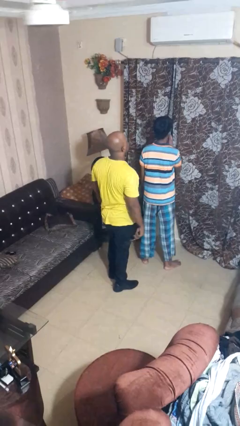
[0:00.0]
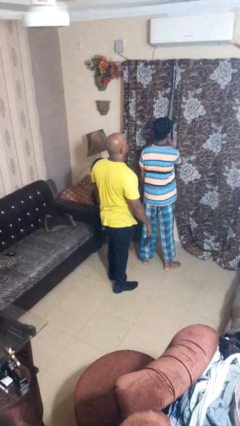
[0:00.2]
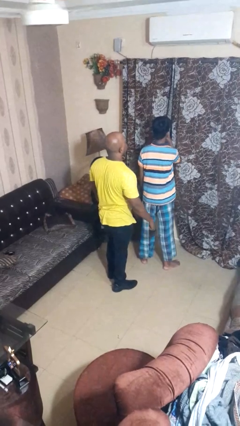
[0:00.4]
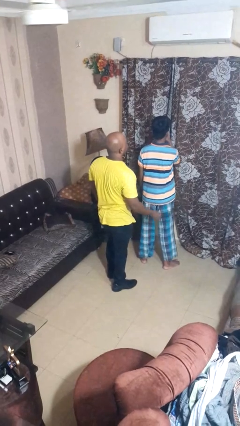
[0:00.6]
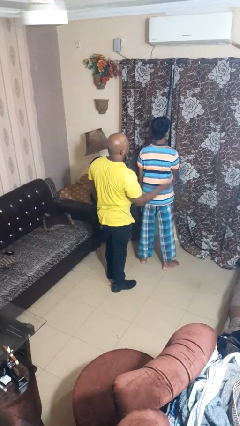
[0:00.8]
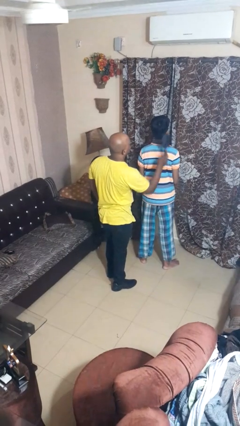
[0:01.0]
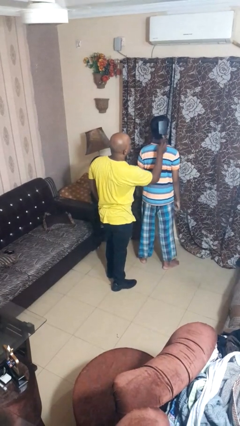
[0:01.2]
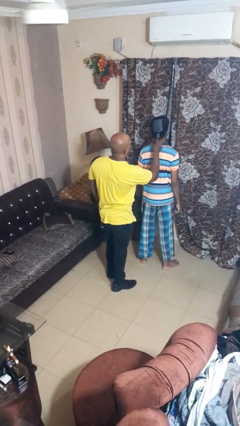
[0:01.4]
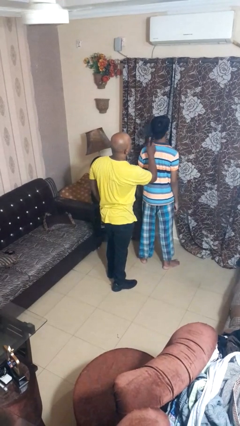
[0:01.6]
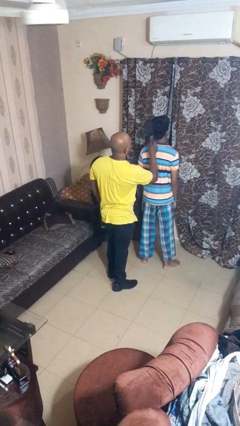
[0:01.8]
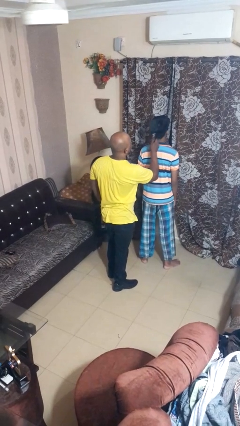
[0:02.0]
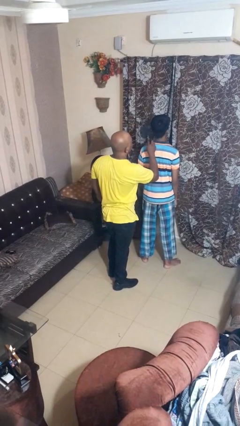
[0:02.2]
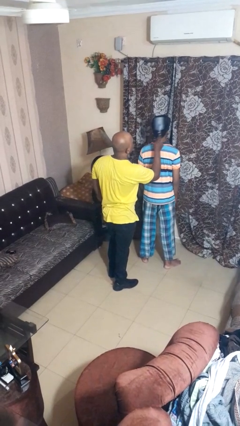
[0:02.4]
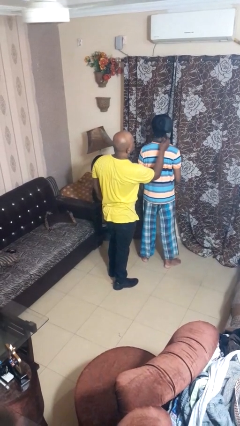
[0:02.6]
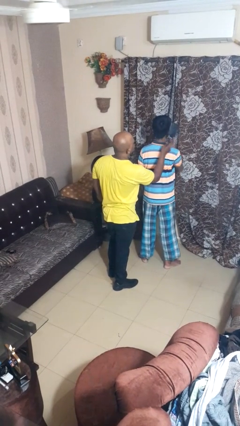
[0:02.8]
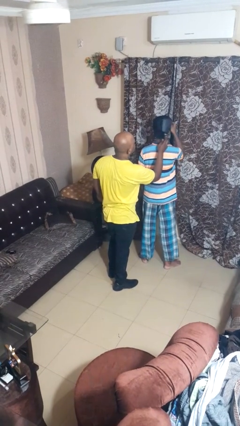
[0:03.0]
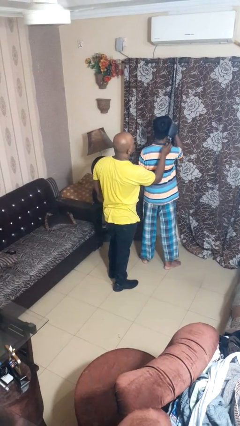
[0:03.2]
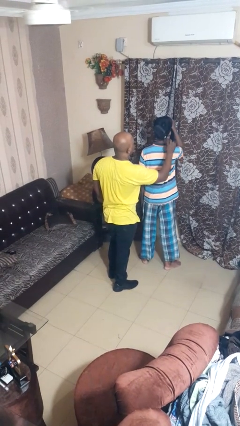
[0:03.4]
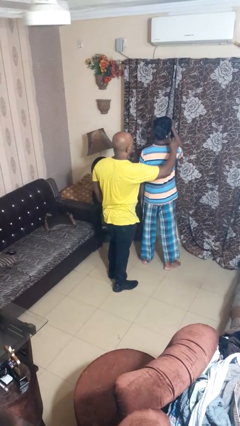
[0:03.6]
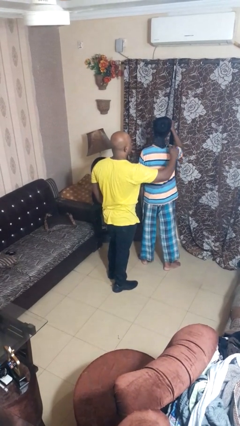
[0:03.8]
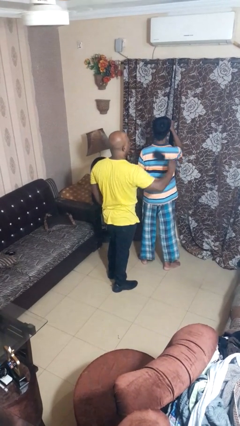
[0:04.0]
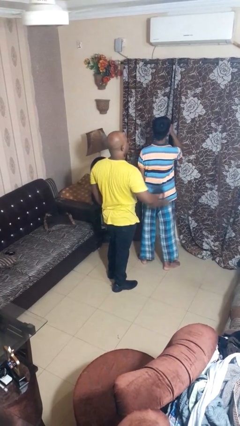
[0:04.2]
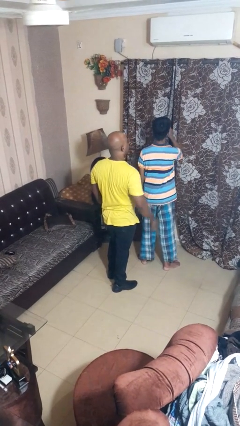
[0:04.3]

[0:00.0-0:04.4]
person brushes hair of person

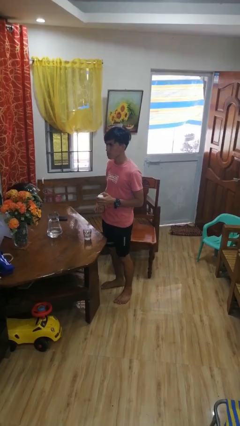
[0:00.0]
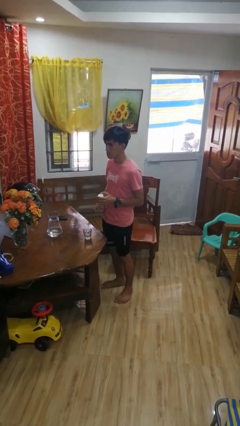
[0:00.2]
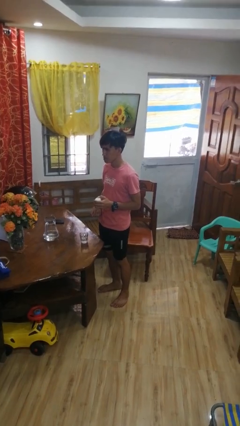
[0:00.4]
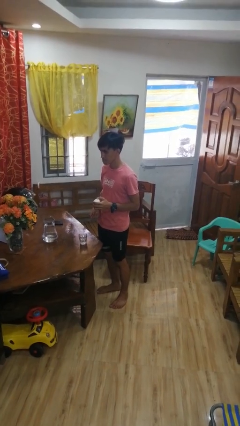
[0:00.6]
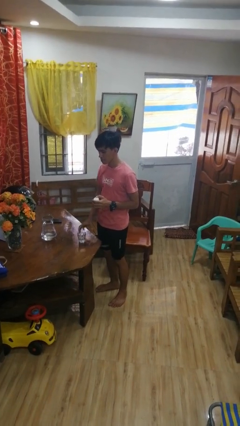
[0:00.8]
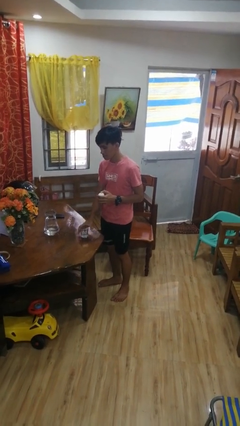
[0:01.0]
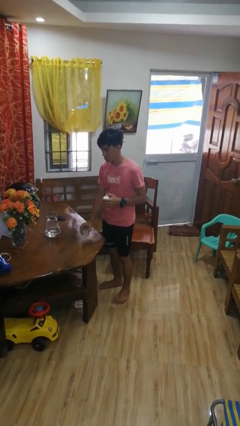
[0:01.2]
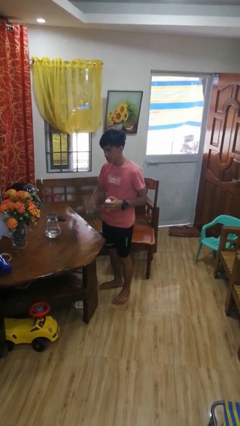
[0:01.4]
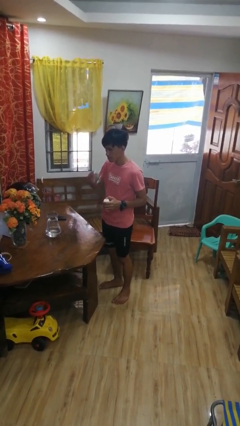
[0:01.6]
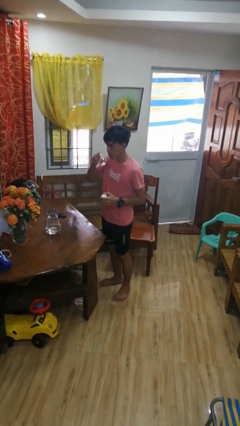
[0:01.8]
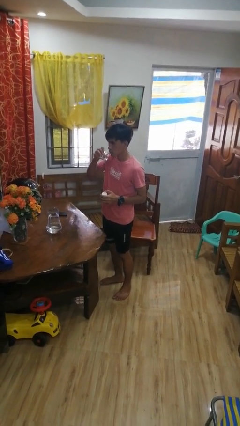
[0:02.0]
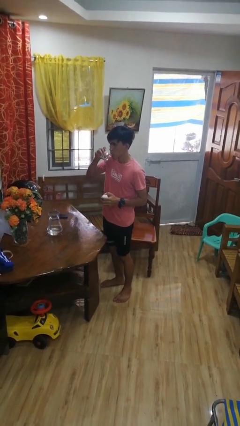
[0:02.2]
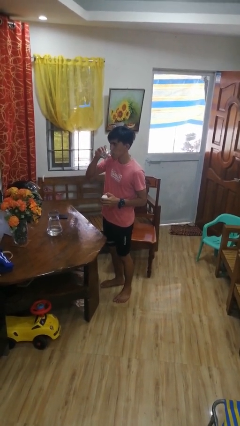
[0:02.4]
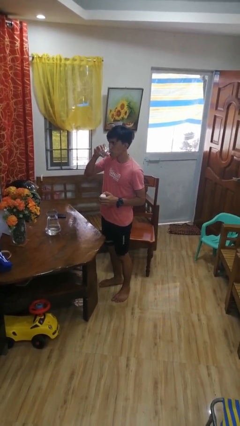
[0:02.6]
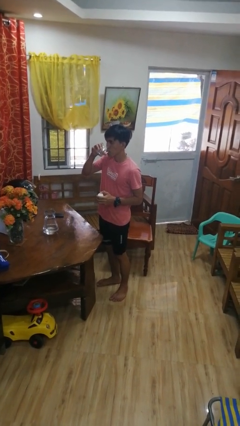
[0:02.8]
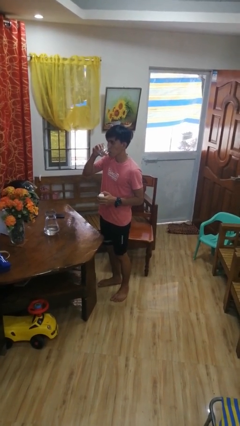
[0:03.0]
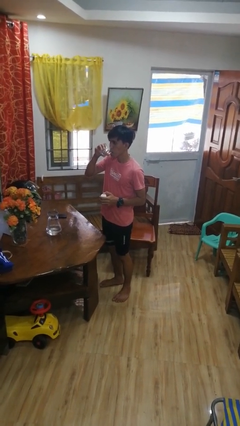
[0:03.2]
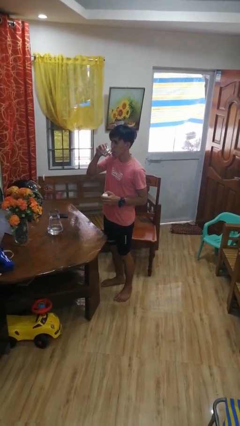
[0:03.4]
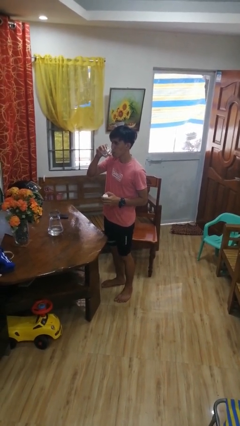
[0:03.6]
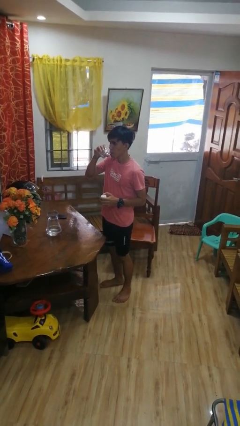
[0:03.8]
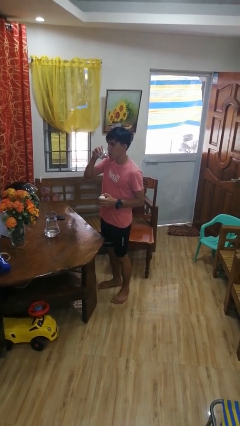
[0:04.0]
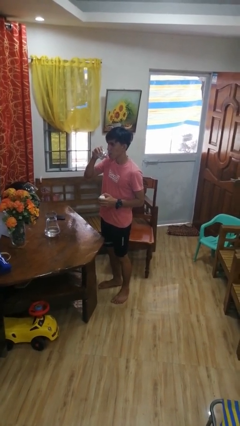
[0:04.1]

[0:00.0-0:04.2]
person drinks from cup

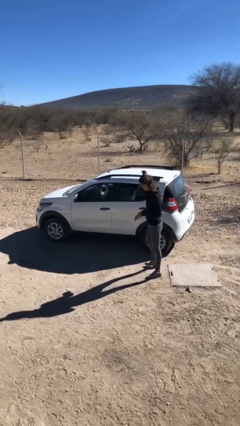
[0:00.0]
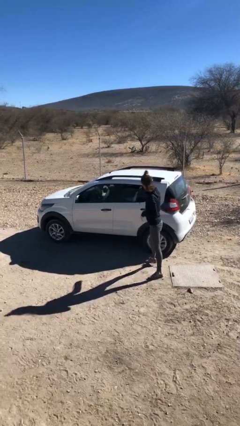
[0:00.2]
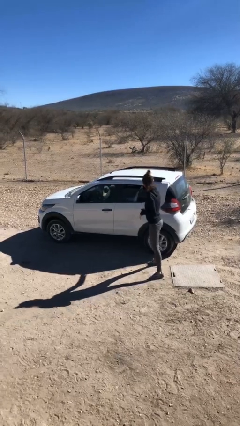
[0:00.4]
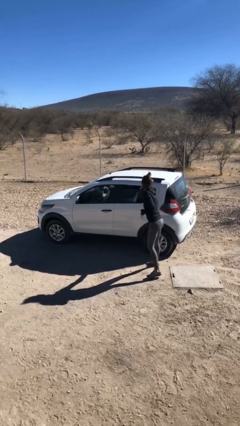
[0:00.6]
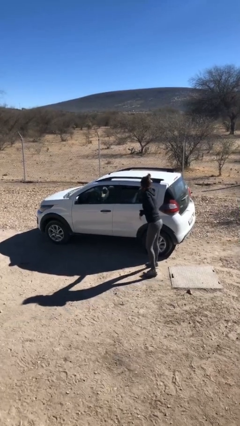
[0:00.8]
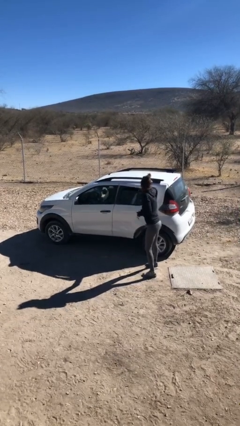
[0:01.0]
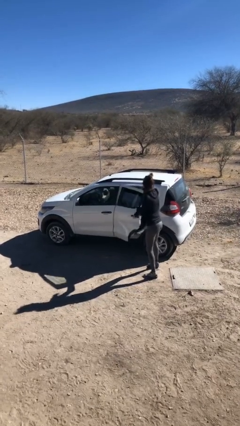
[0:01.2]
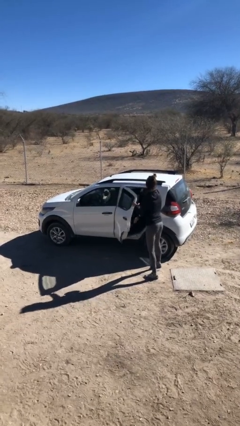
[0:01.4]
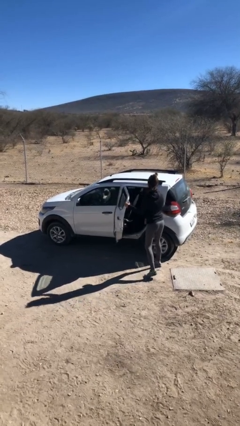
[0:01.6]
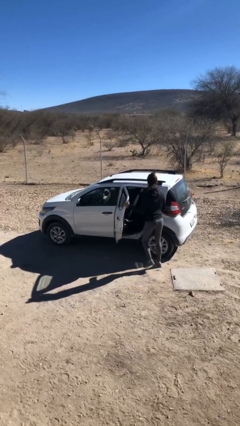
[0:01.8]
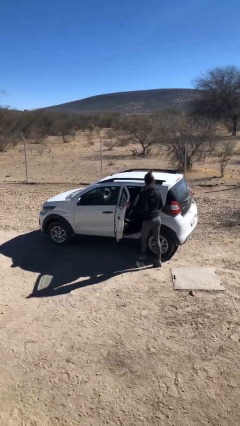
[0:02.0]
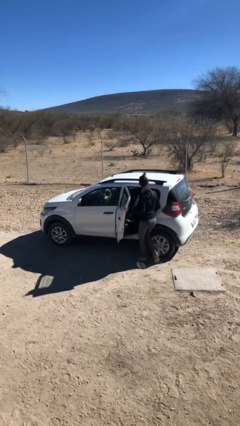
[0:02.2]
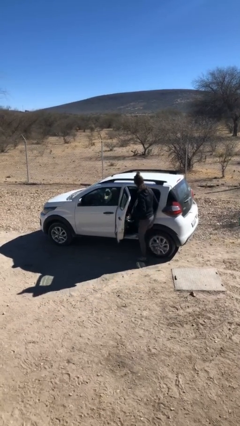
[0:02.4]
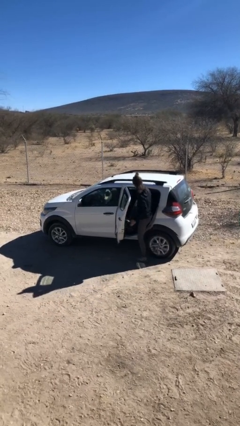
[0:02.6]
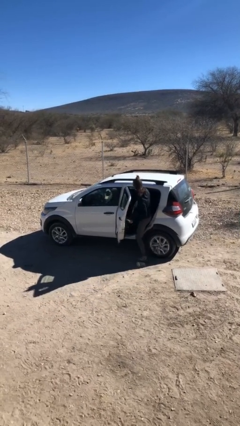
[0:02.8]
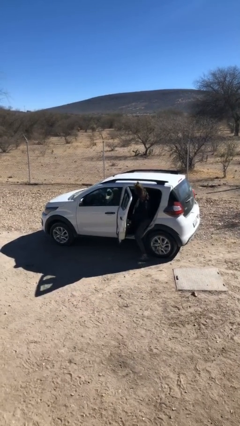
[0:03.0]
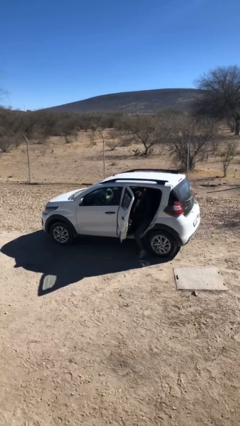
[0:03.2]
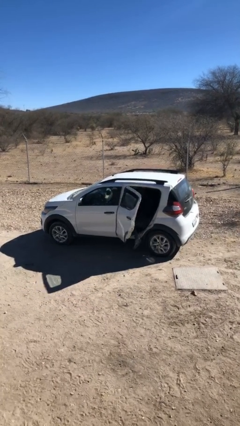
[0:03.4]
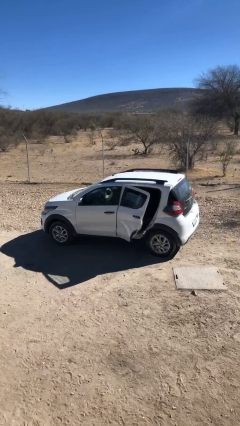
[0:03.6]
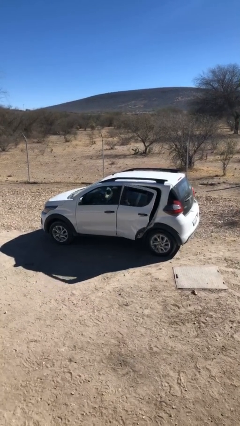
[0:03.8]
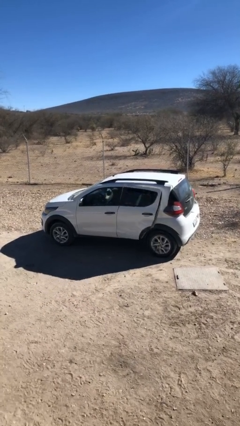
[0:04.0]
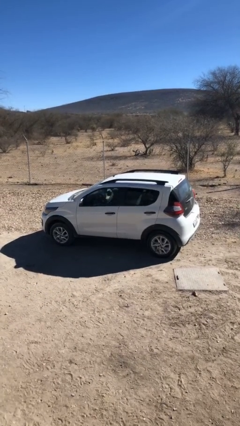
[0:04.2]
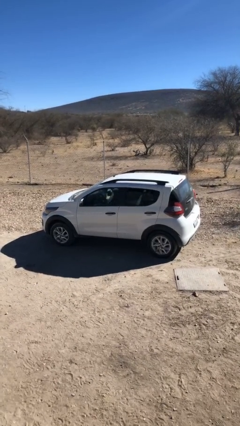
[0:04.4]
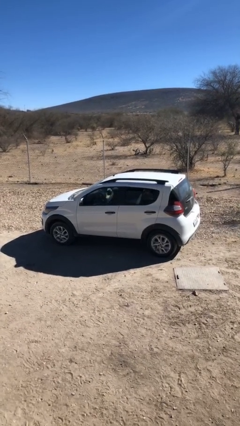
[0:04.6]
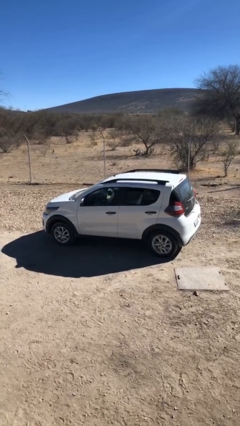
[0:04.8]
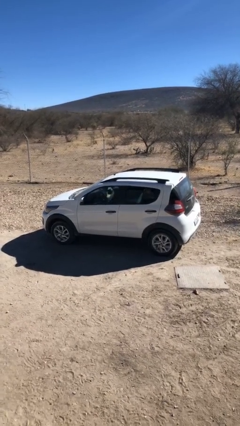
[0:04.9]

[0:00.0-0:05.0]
car picks up person

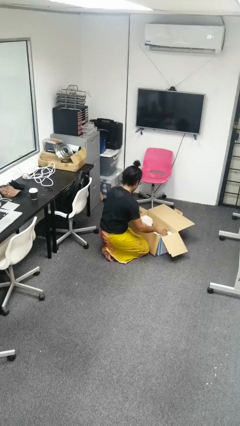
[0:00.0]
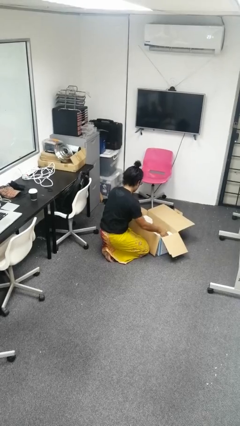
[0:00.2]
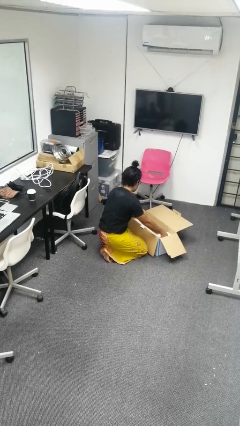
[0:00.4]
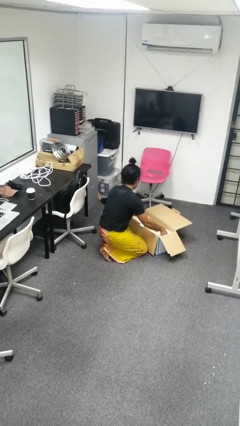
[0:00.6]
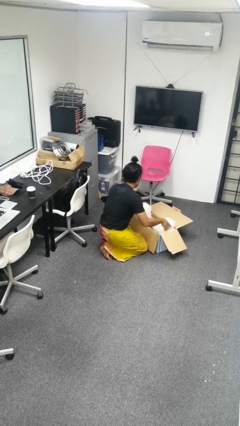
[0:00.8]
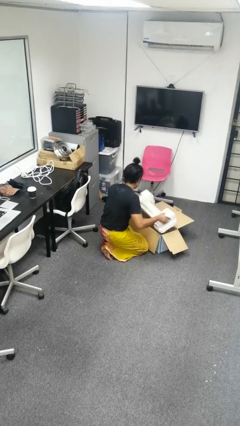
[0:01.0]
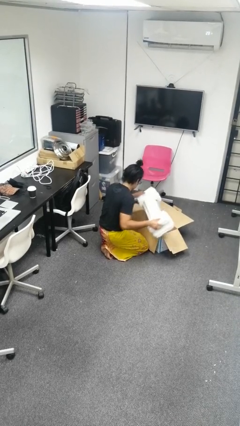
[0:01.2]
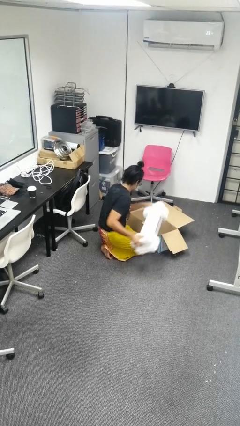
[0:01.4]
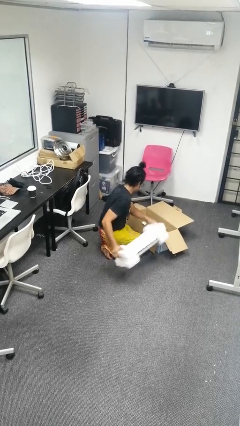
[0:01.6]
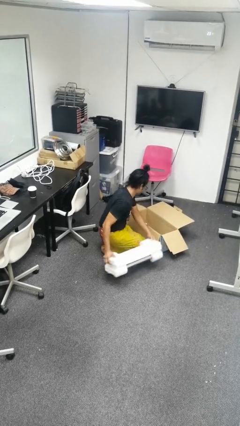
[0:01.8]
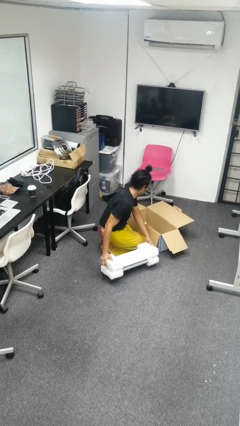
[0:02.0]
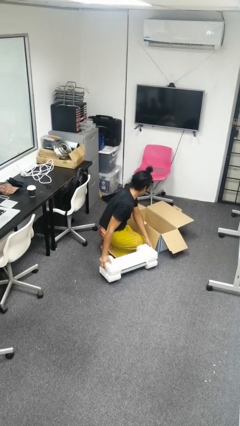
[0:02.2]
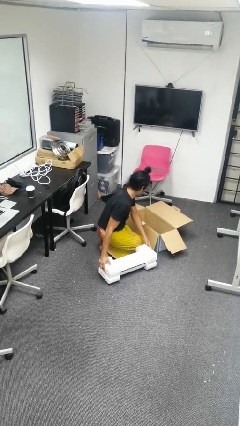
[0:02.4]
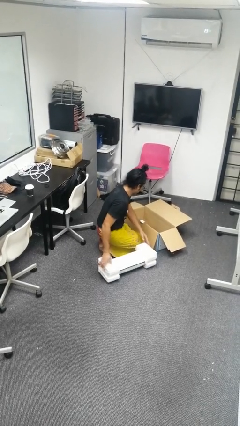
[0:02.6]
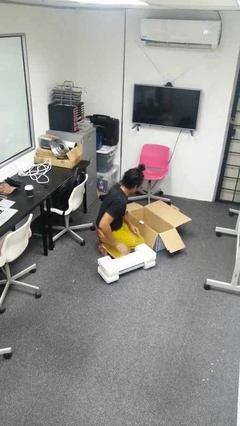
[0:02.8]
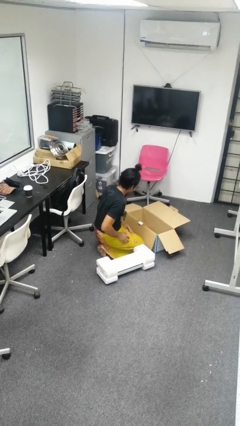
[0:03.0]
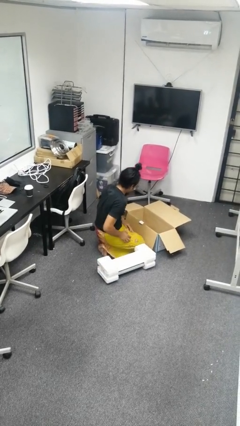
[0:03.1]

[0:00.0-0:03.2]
person takes object from box

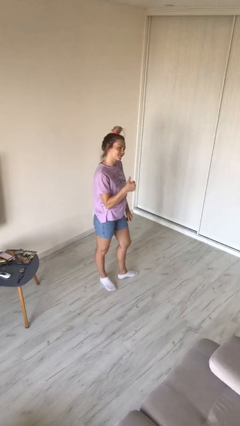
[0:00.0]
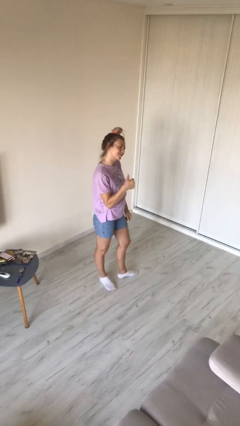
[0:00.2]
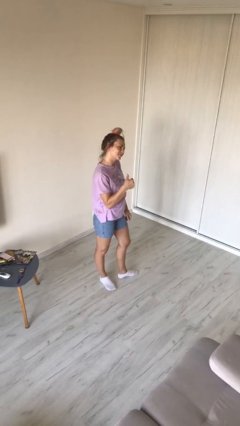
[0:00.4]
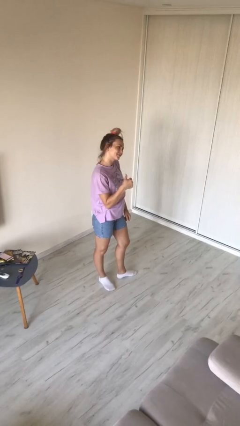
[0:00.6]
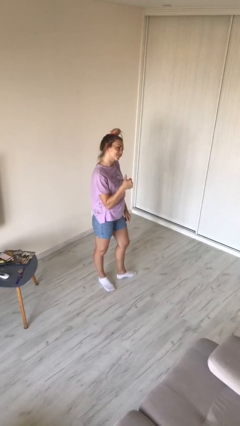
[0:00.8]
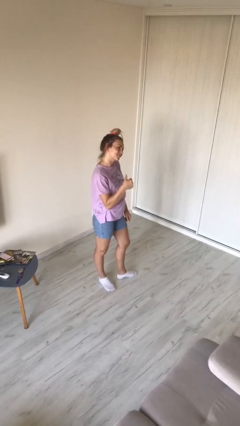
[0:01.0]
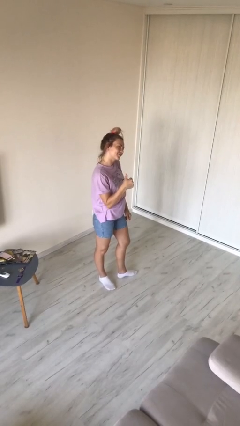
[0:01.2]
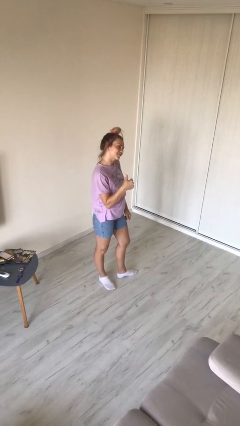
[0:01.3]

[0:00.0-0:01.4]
person gestures thumbs up
